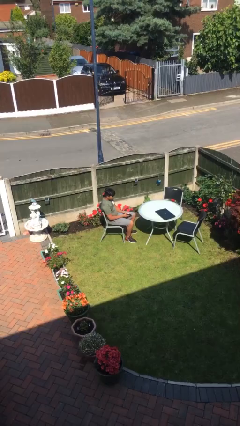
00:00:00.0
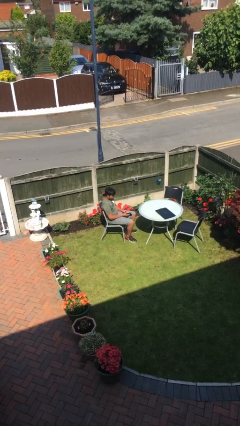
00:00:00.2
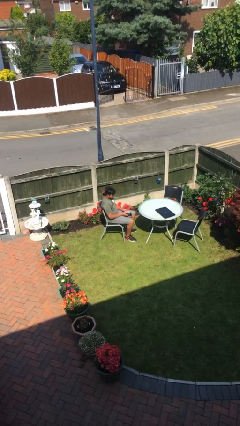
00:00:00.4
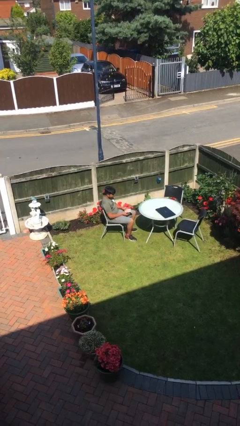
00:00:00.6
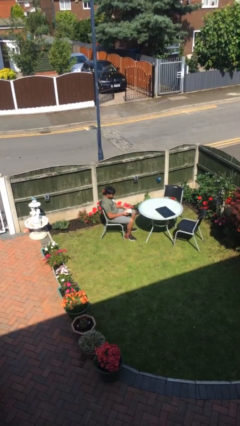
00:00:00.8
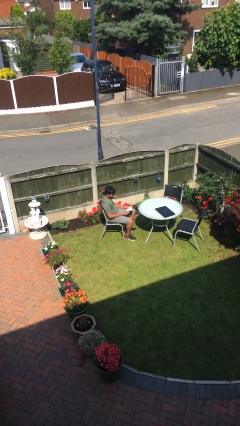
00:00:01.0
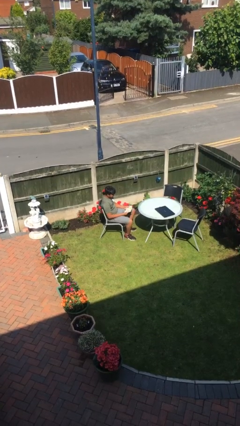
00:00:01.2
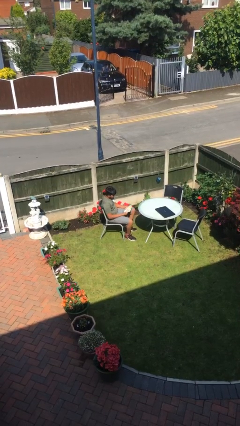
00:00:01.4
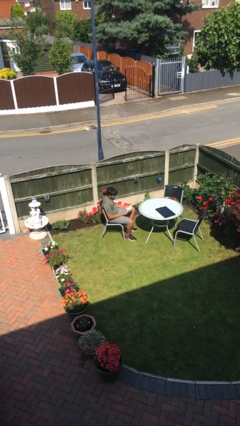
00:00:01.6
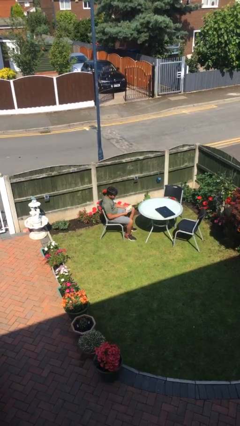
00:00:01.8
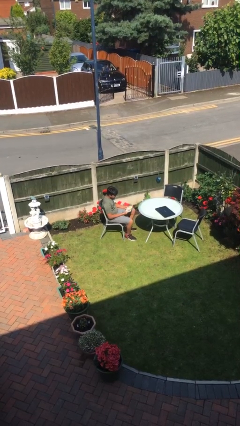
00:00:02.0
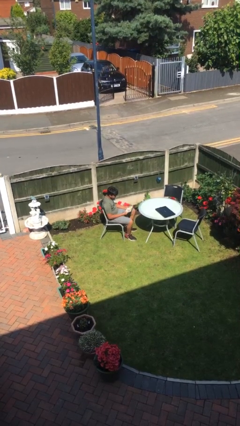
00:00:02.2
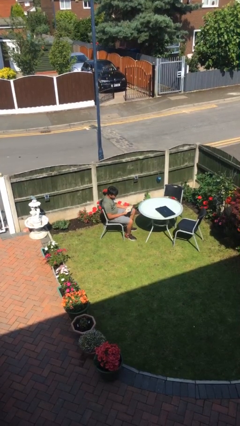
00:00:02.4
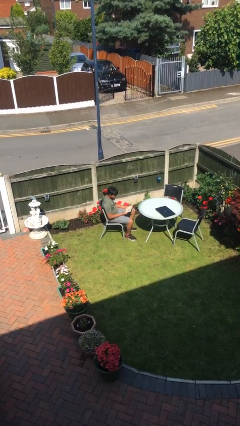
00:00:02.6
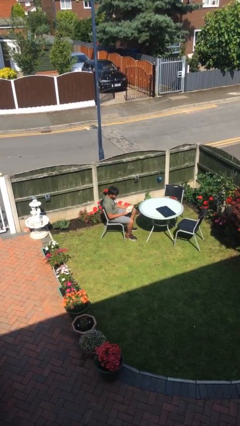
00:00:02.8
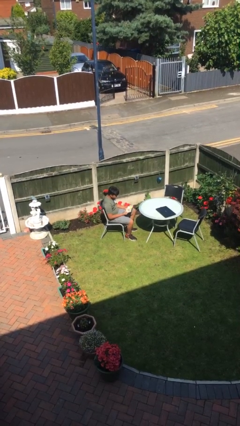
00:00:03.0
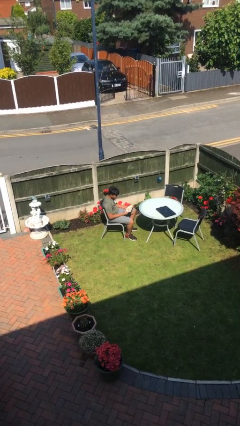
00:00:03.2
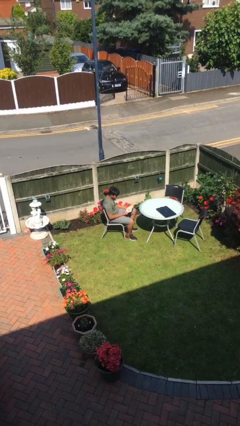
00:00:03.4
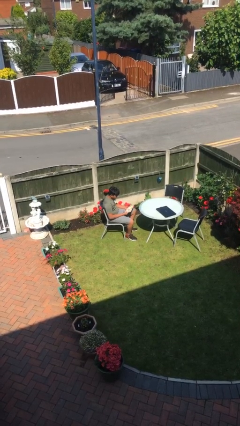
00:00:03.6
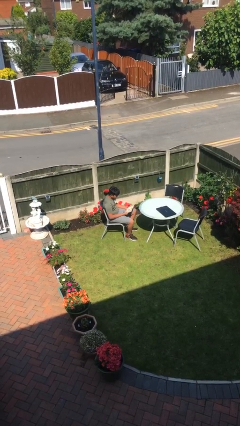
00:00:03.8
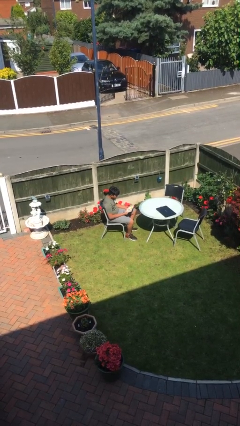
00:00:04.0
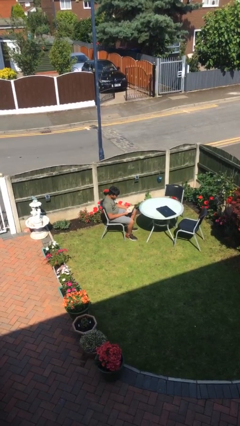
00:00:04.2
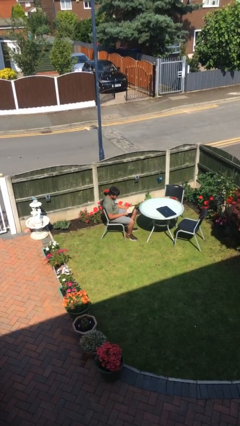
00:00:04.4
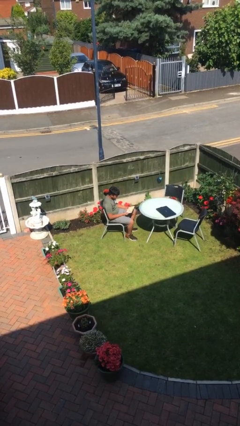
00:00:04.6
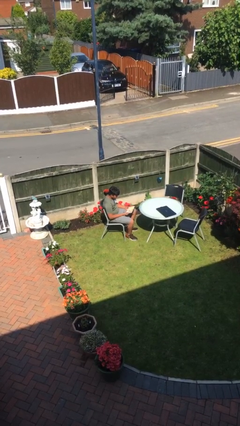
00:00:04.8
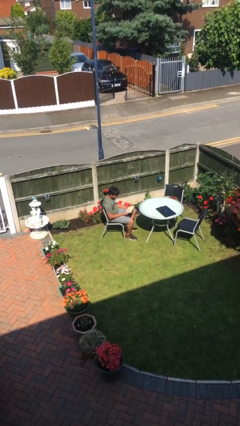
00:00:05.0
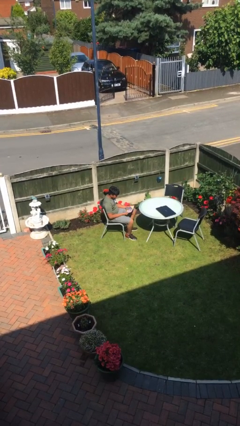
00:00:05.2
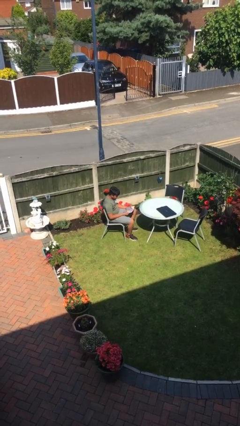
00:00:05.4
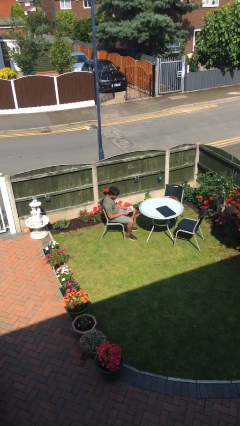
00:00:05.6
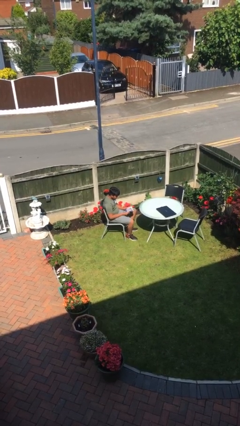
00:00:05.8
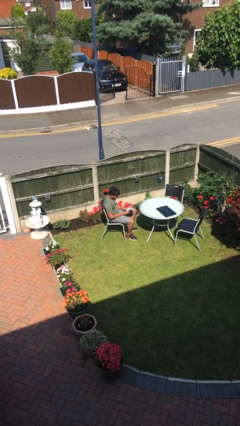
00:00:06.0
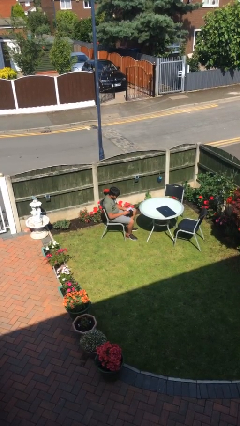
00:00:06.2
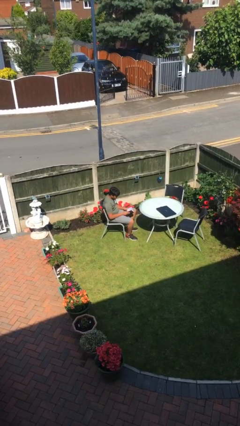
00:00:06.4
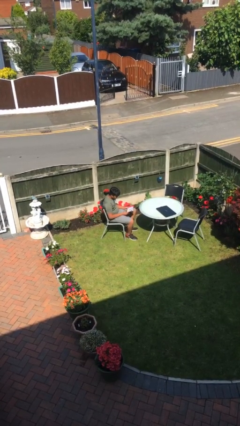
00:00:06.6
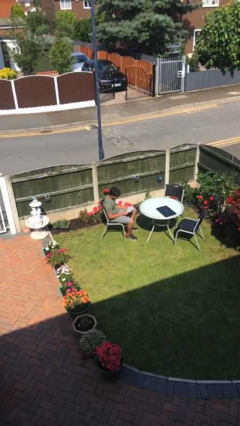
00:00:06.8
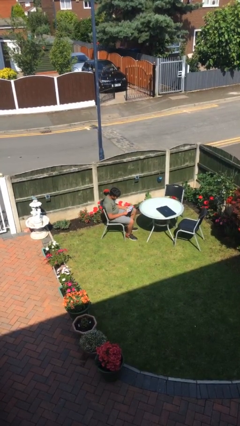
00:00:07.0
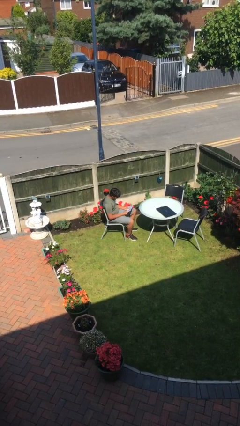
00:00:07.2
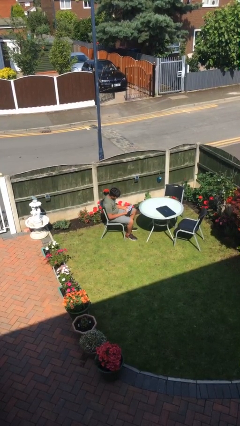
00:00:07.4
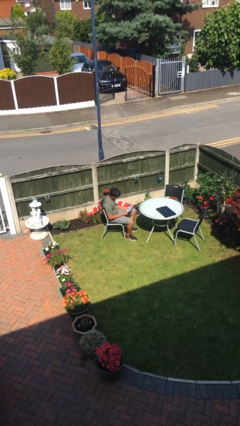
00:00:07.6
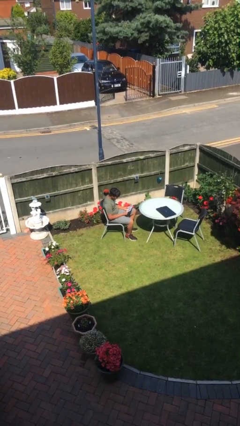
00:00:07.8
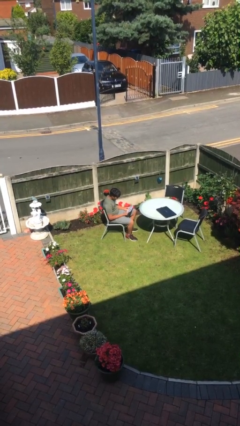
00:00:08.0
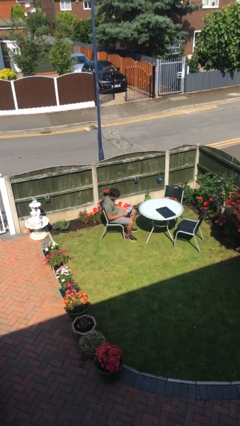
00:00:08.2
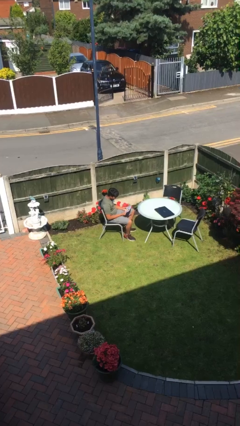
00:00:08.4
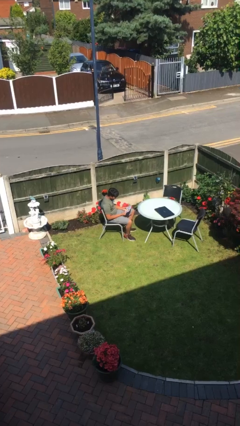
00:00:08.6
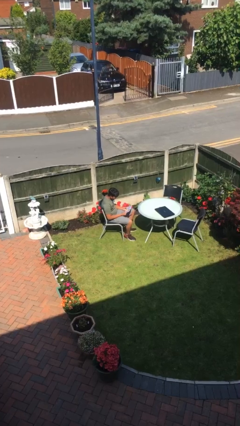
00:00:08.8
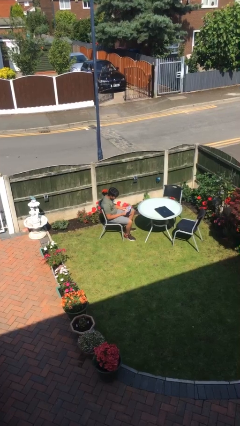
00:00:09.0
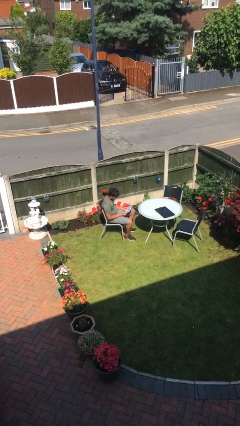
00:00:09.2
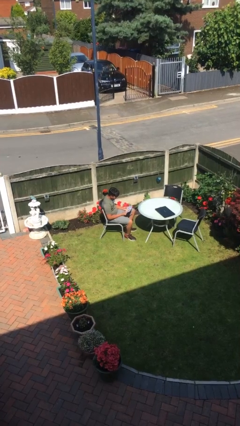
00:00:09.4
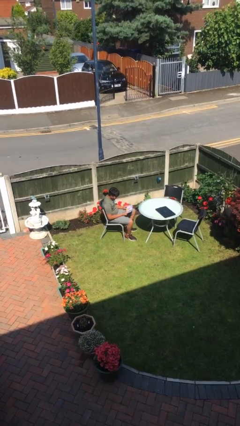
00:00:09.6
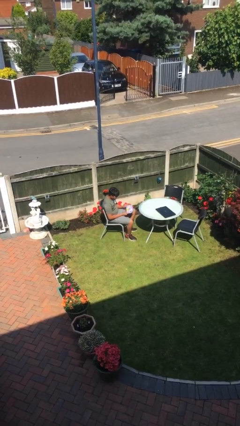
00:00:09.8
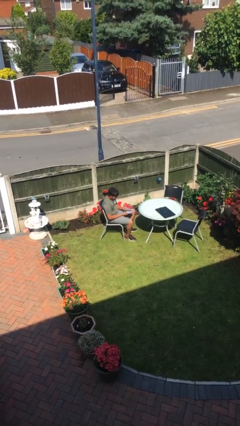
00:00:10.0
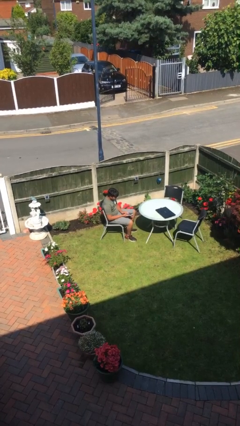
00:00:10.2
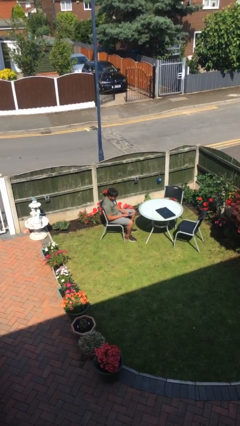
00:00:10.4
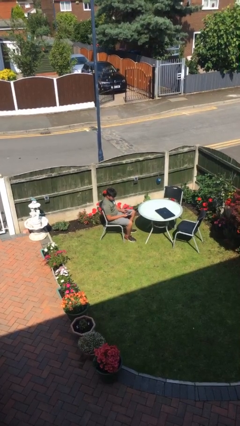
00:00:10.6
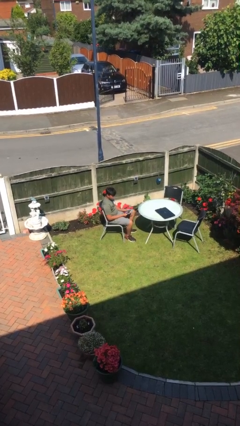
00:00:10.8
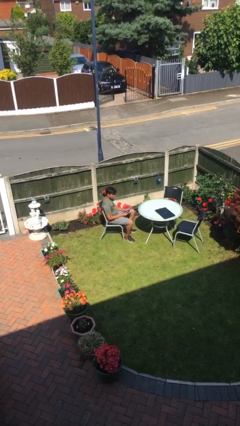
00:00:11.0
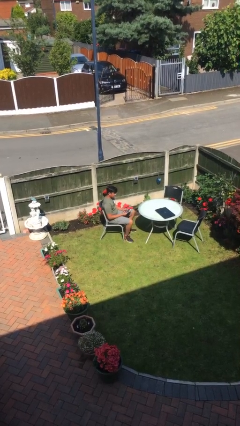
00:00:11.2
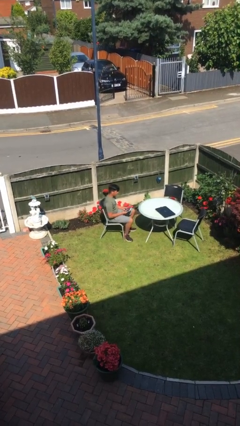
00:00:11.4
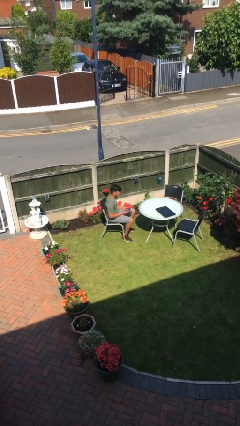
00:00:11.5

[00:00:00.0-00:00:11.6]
person reads document

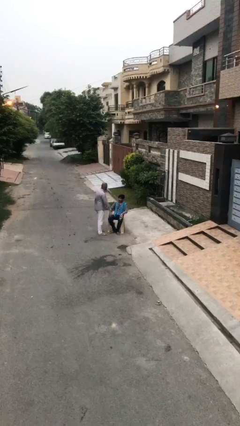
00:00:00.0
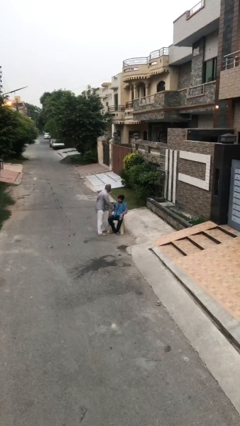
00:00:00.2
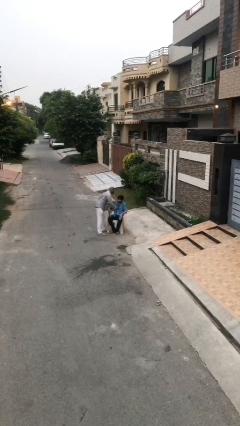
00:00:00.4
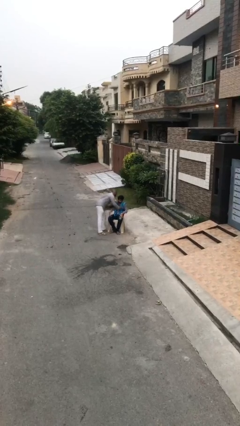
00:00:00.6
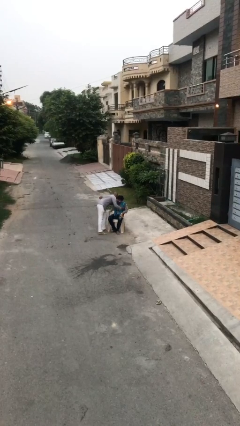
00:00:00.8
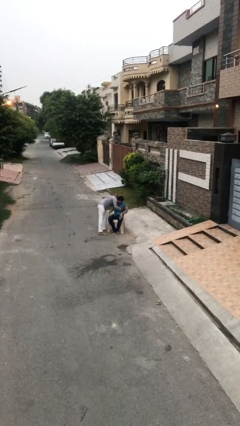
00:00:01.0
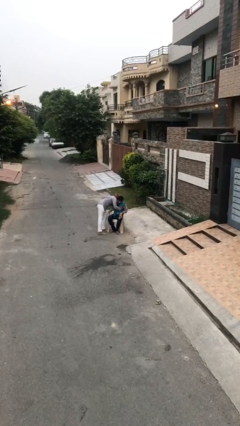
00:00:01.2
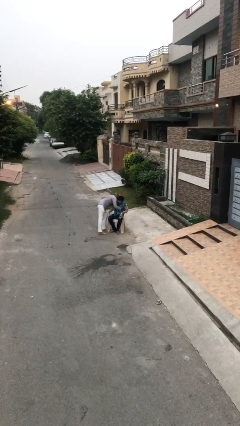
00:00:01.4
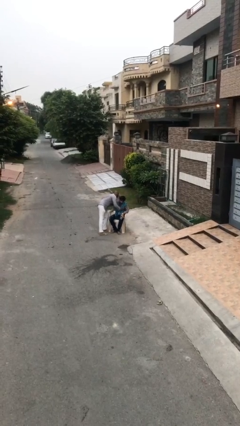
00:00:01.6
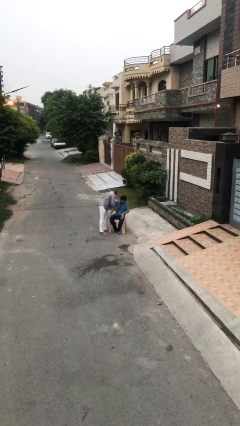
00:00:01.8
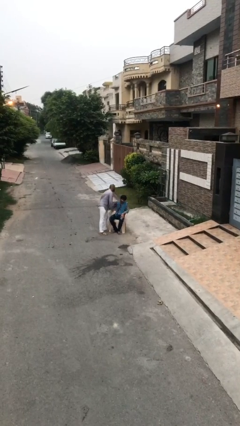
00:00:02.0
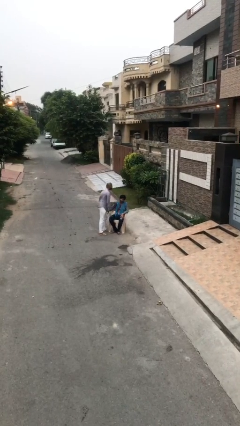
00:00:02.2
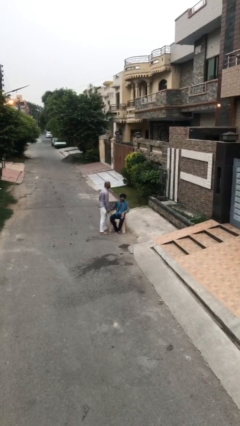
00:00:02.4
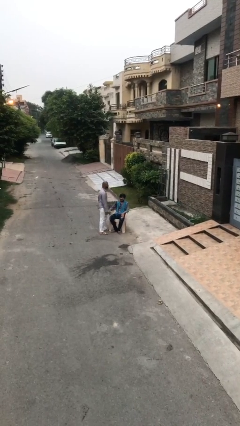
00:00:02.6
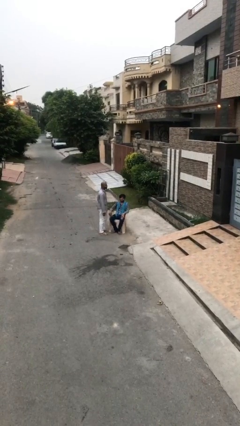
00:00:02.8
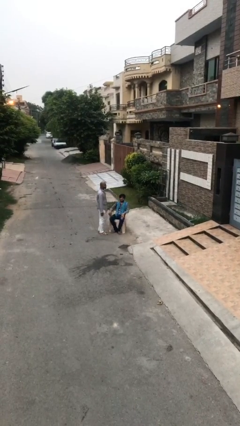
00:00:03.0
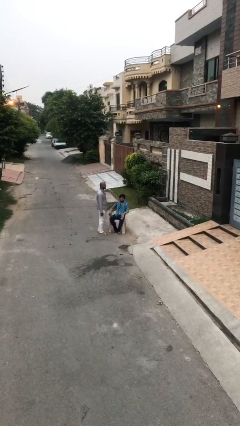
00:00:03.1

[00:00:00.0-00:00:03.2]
person embraces person

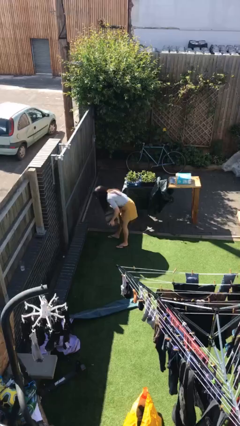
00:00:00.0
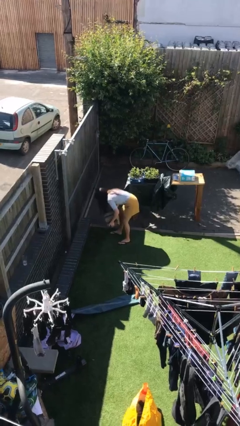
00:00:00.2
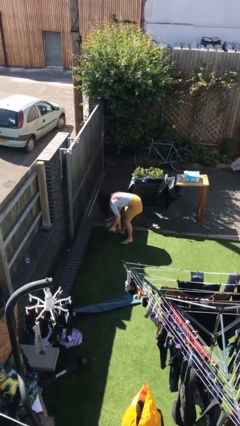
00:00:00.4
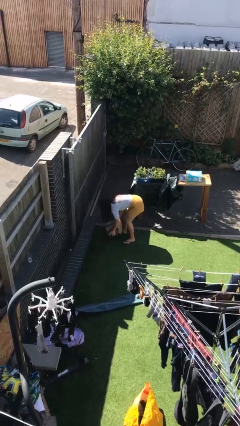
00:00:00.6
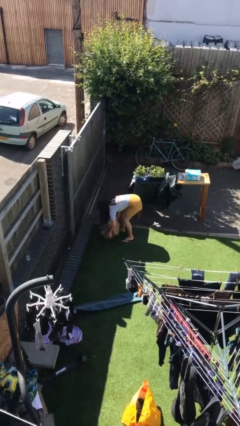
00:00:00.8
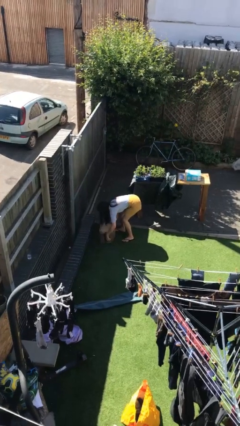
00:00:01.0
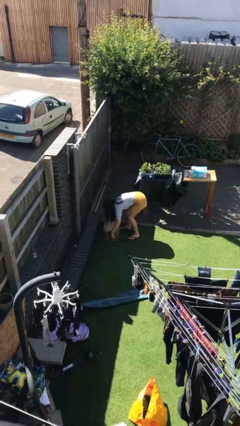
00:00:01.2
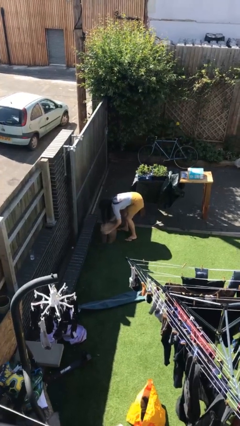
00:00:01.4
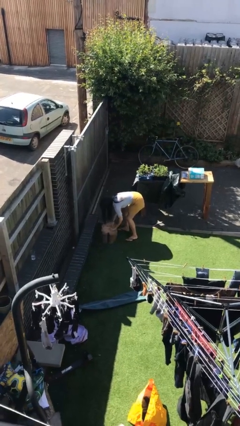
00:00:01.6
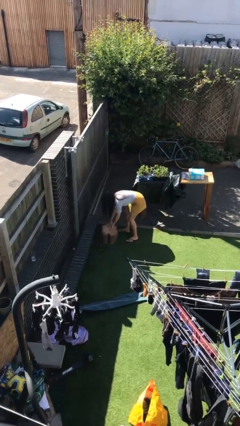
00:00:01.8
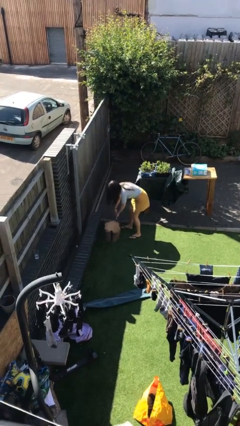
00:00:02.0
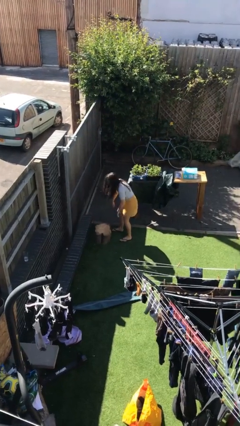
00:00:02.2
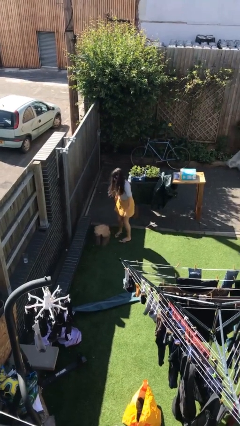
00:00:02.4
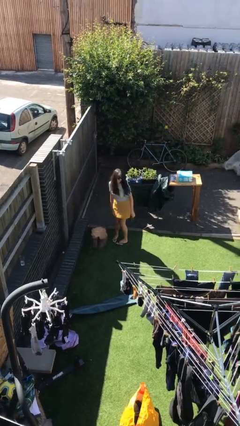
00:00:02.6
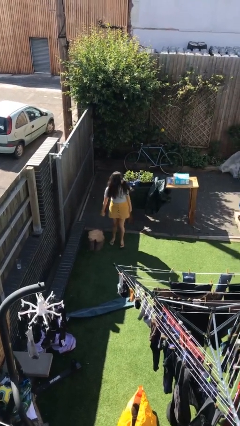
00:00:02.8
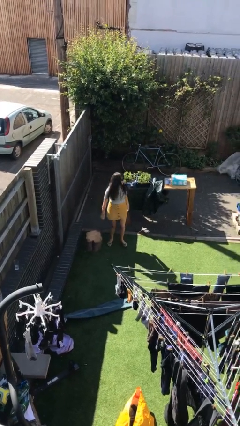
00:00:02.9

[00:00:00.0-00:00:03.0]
person puts down object on floor

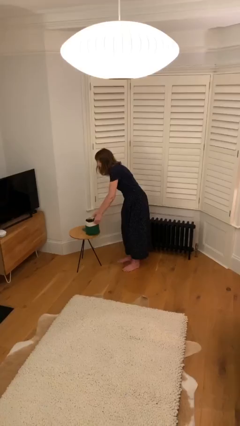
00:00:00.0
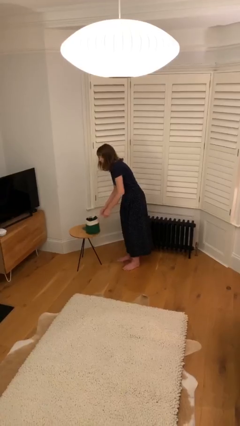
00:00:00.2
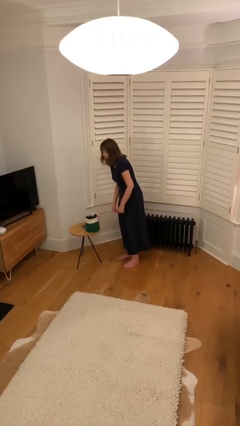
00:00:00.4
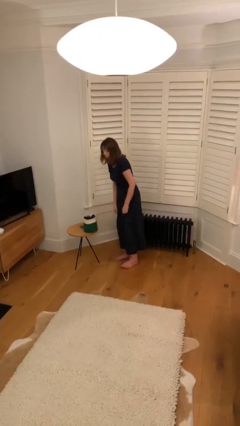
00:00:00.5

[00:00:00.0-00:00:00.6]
person puts down object on table
